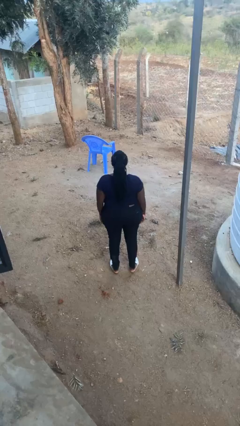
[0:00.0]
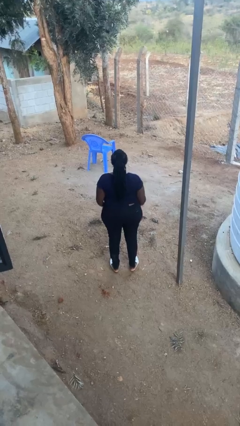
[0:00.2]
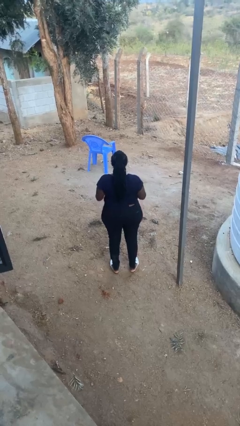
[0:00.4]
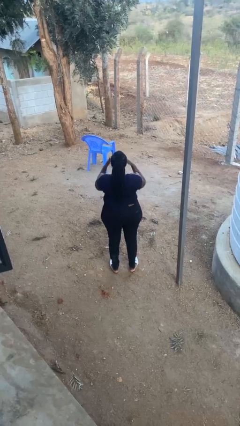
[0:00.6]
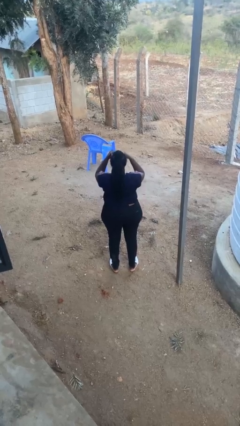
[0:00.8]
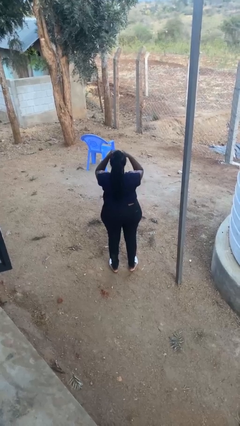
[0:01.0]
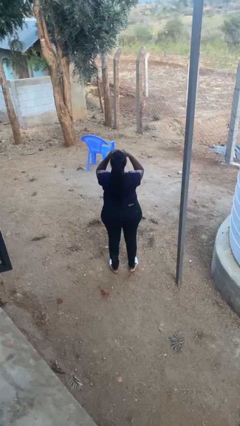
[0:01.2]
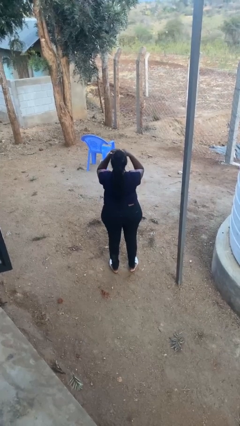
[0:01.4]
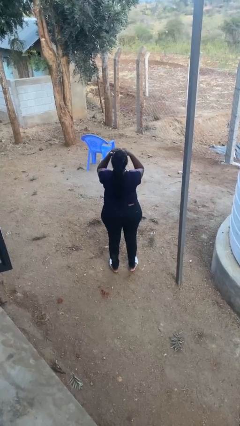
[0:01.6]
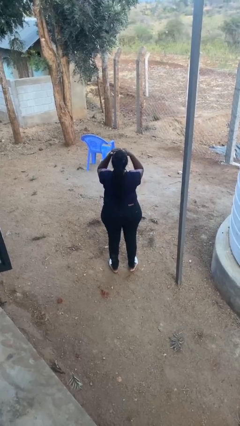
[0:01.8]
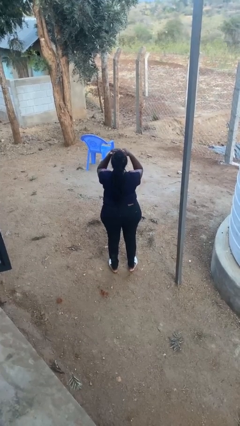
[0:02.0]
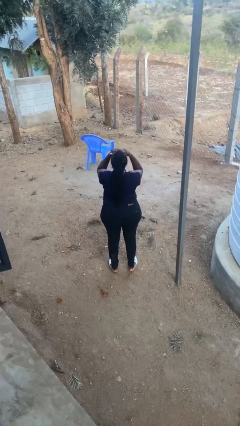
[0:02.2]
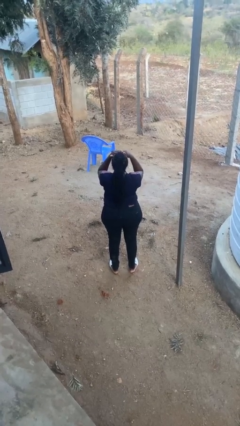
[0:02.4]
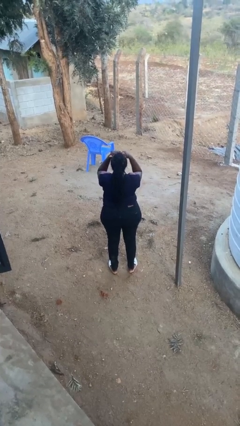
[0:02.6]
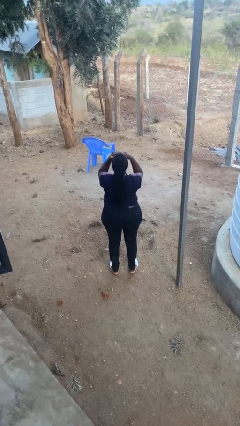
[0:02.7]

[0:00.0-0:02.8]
person shades eyes

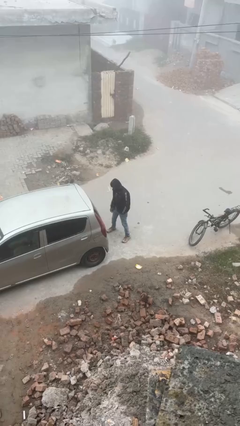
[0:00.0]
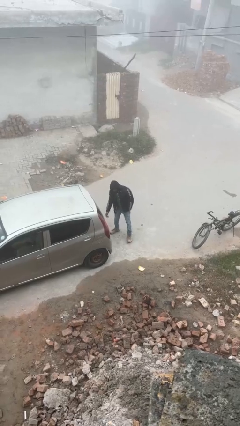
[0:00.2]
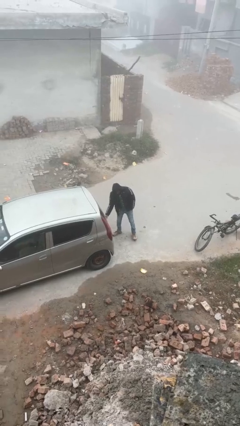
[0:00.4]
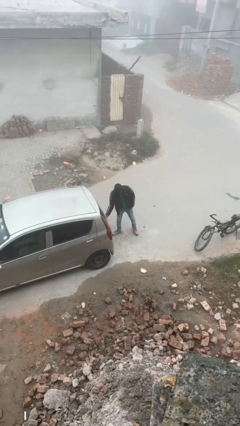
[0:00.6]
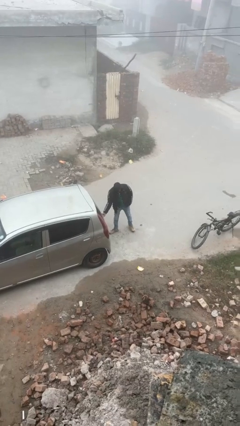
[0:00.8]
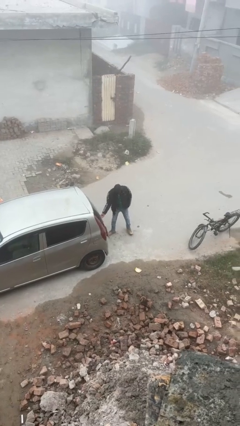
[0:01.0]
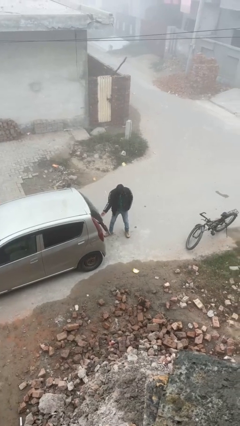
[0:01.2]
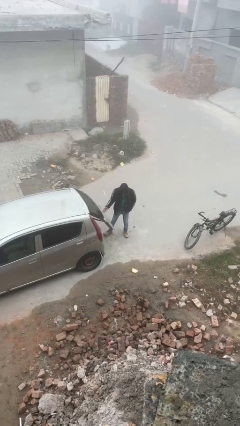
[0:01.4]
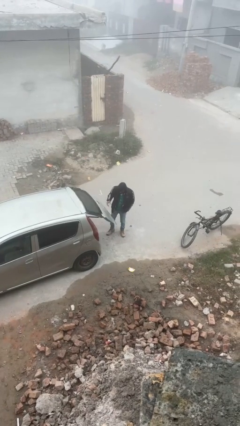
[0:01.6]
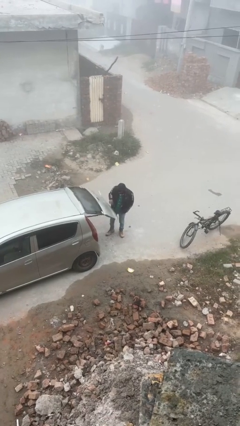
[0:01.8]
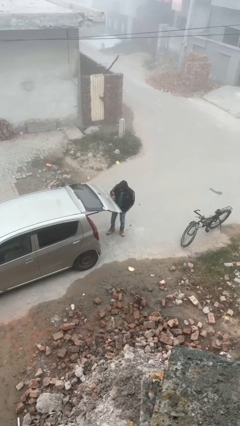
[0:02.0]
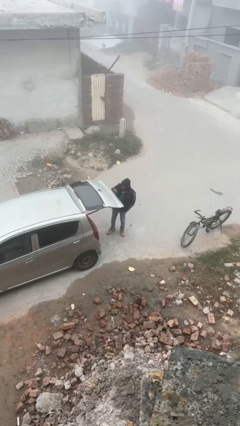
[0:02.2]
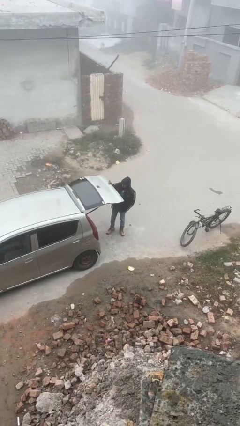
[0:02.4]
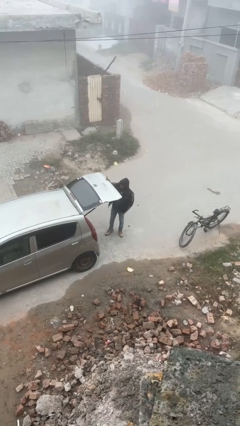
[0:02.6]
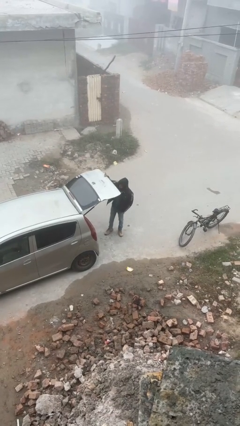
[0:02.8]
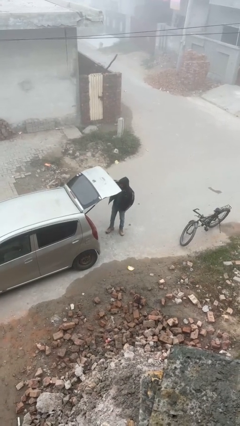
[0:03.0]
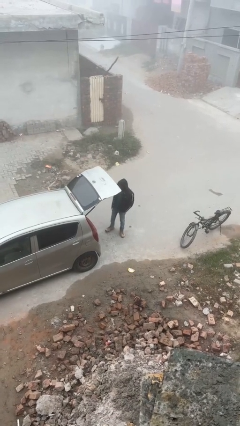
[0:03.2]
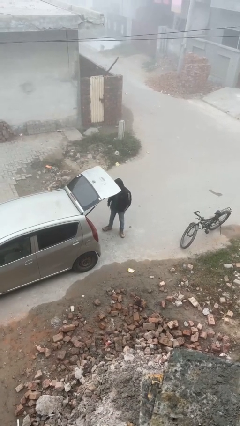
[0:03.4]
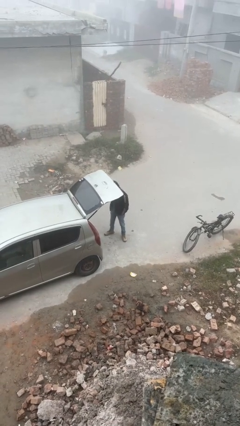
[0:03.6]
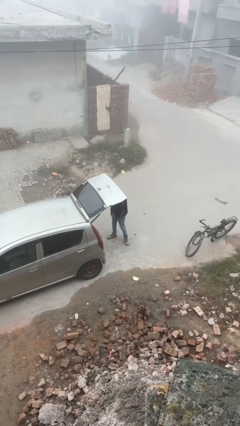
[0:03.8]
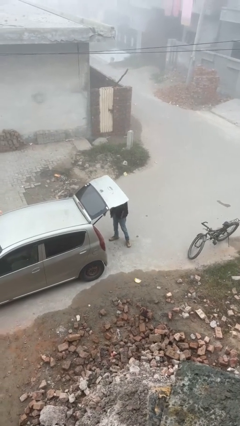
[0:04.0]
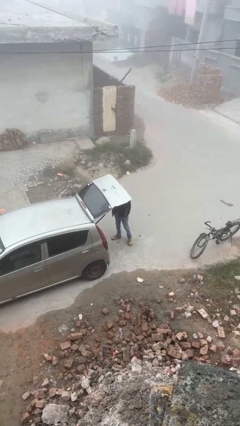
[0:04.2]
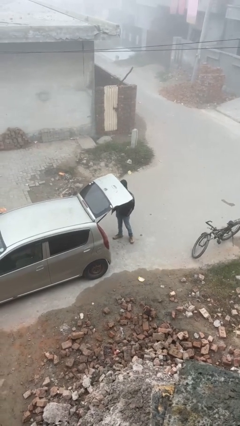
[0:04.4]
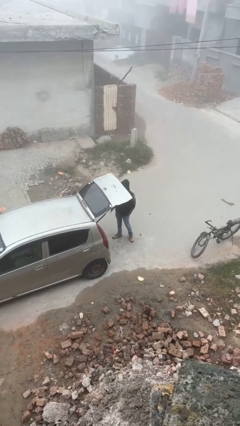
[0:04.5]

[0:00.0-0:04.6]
person opens car trunk

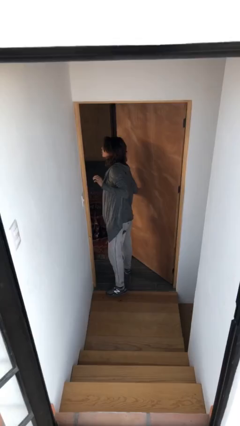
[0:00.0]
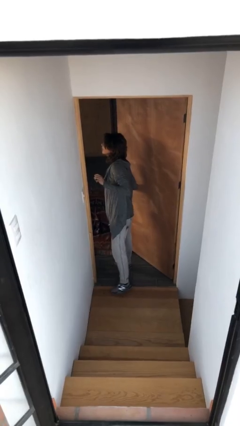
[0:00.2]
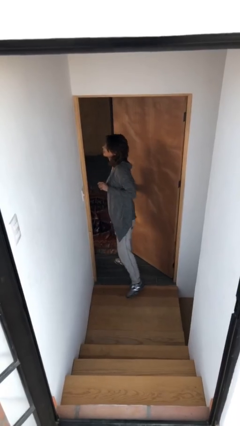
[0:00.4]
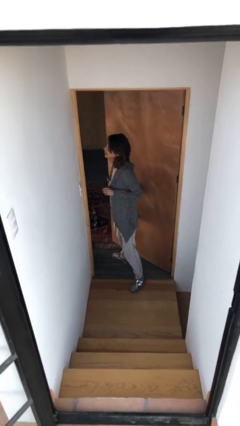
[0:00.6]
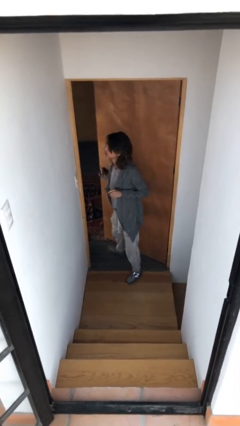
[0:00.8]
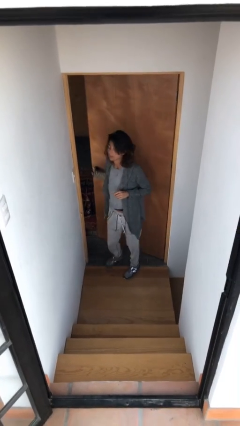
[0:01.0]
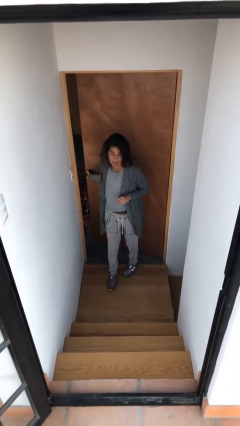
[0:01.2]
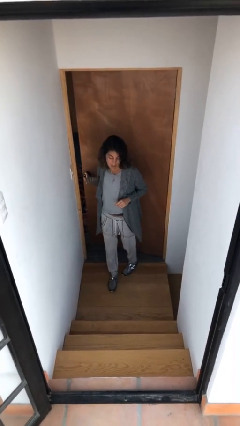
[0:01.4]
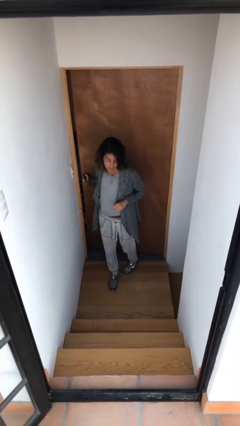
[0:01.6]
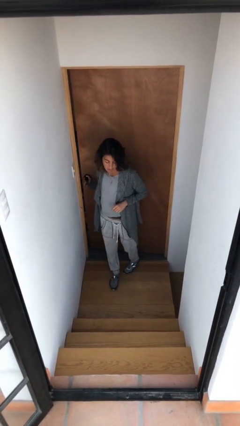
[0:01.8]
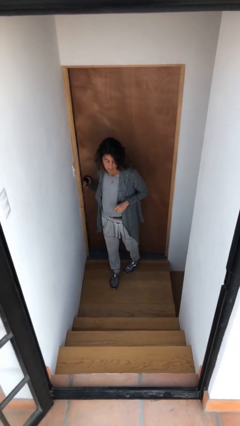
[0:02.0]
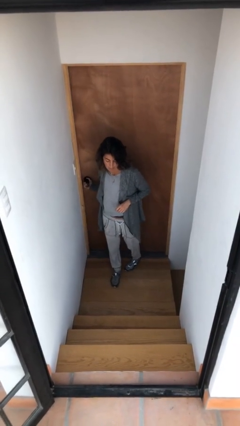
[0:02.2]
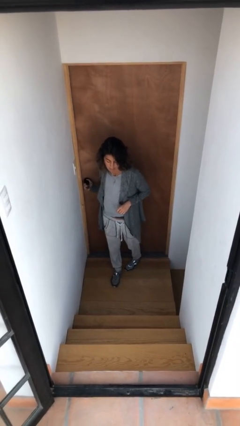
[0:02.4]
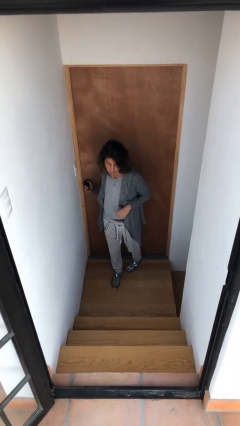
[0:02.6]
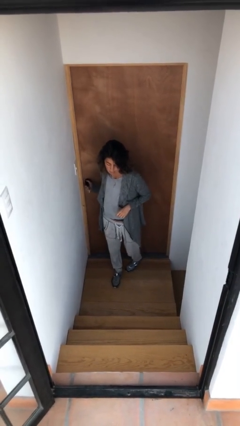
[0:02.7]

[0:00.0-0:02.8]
person closes facility door

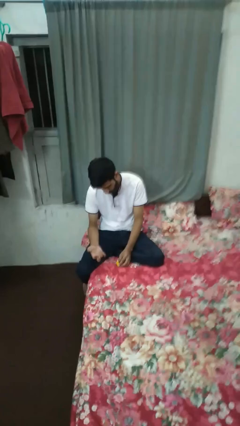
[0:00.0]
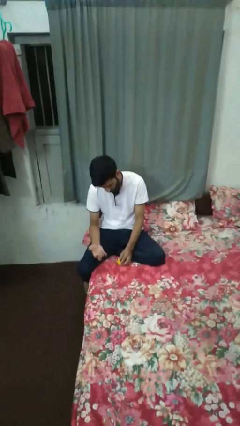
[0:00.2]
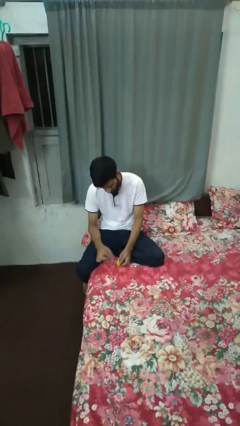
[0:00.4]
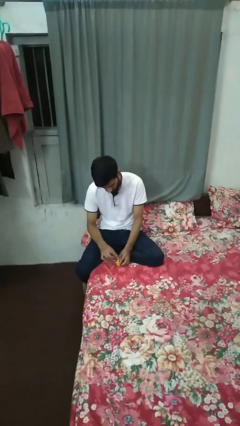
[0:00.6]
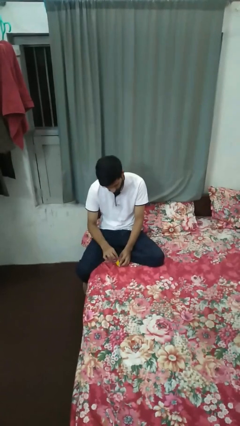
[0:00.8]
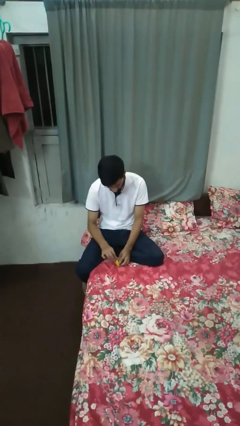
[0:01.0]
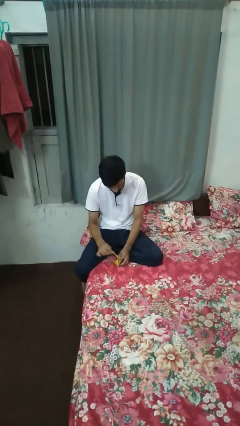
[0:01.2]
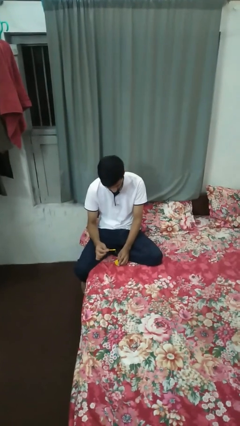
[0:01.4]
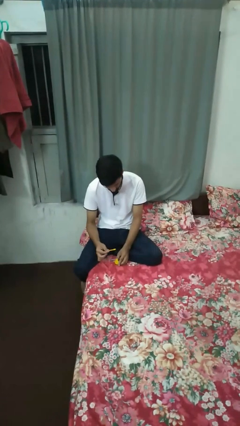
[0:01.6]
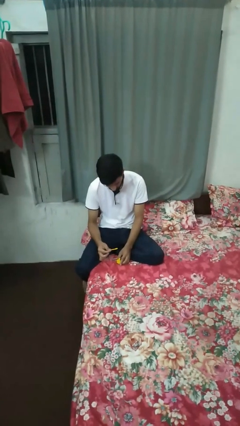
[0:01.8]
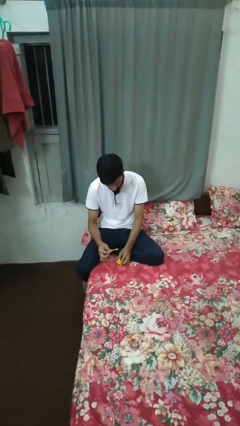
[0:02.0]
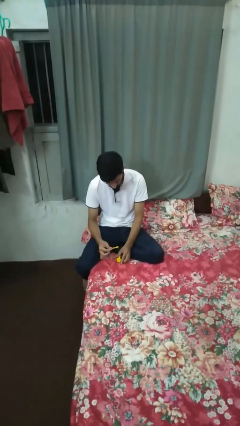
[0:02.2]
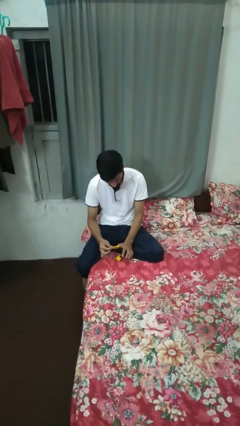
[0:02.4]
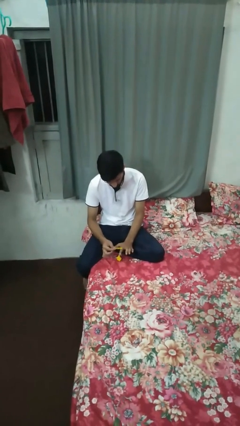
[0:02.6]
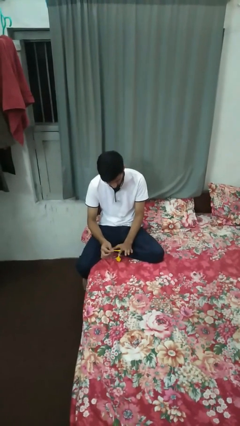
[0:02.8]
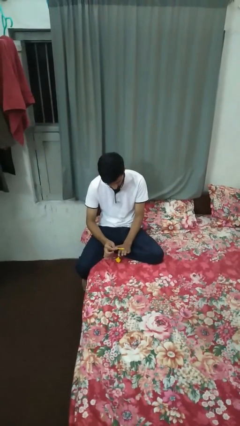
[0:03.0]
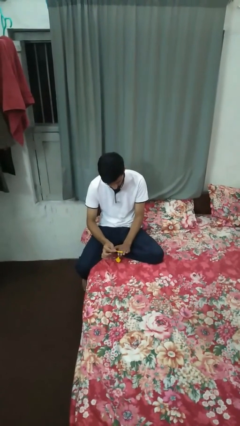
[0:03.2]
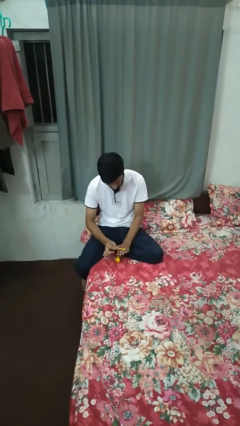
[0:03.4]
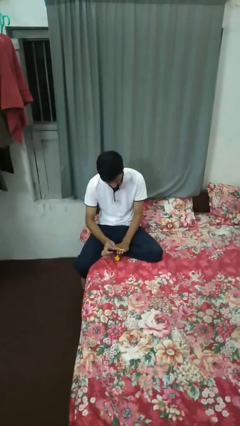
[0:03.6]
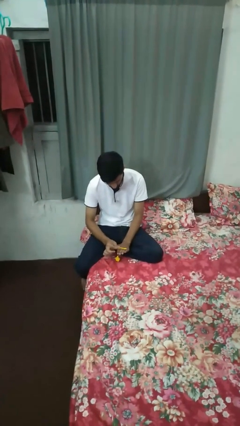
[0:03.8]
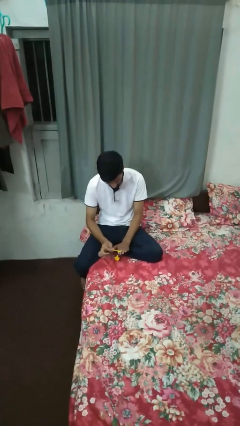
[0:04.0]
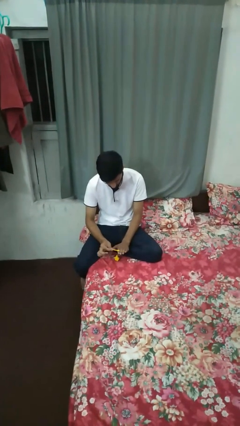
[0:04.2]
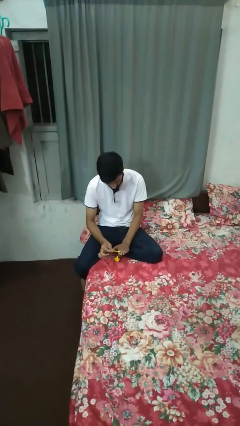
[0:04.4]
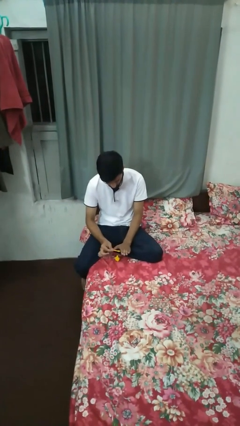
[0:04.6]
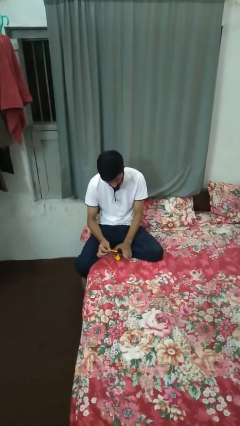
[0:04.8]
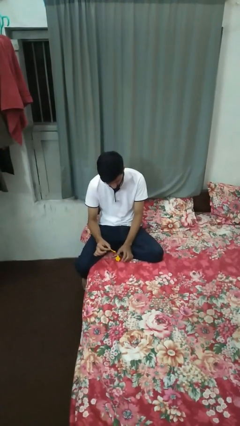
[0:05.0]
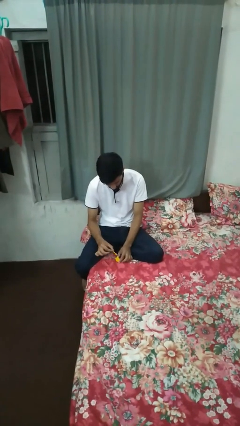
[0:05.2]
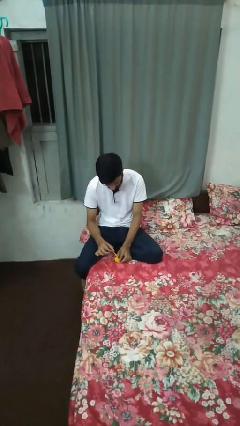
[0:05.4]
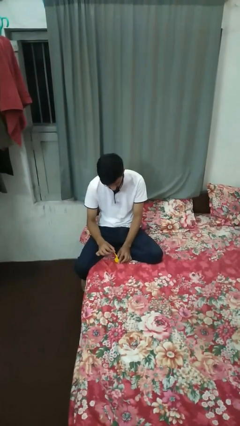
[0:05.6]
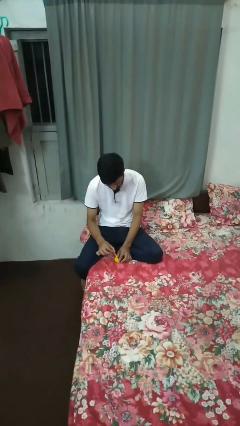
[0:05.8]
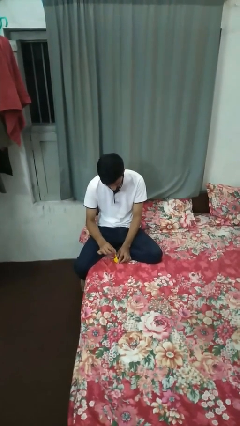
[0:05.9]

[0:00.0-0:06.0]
person paints fingernails

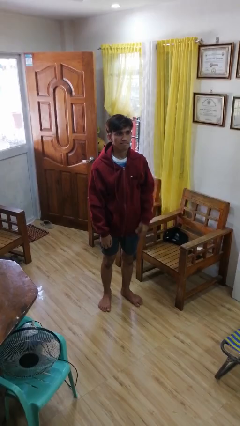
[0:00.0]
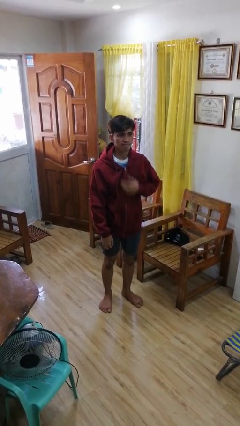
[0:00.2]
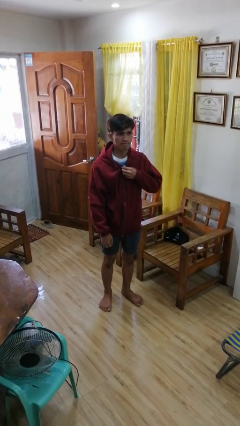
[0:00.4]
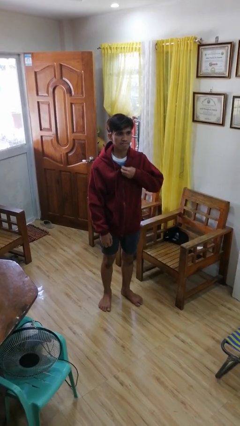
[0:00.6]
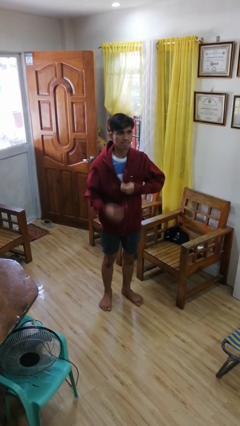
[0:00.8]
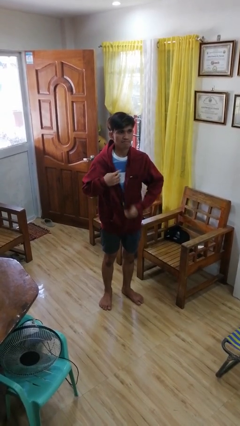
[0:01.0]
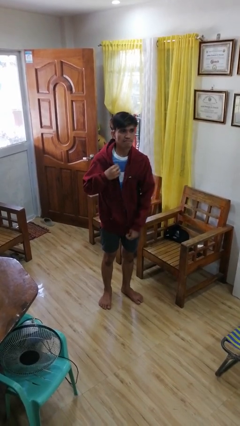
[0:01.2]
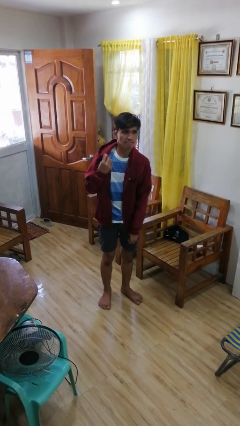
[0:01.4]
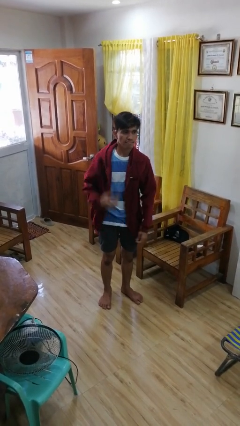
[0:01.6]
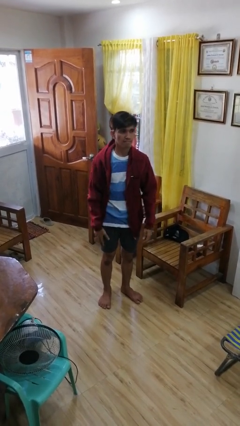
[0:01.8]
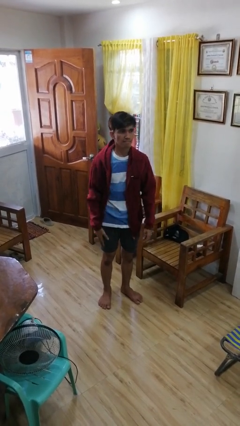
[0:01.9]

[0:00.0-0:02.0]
person unzips jacket
